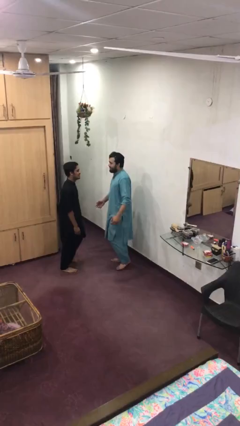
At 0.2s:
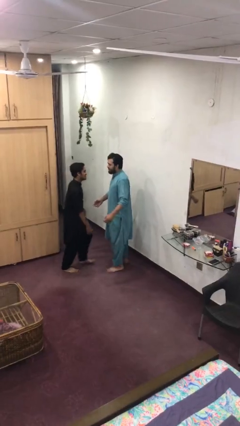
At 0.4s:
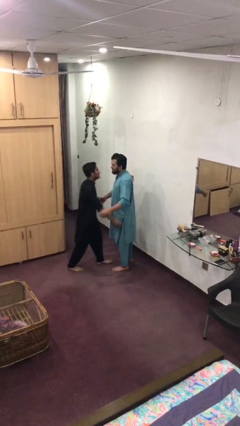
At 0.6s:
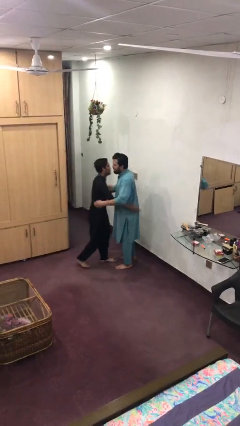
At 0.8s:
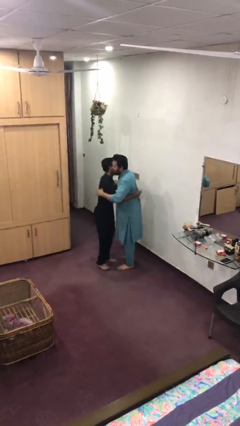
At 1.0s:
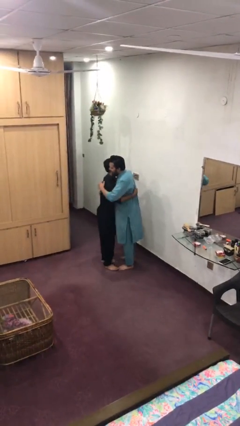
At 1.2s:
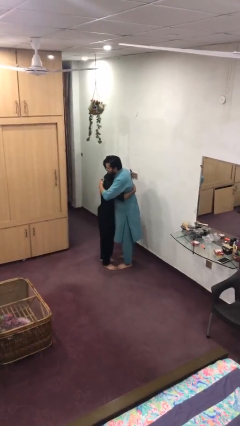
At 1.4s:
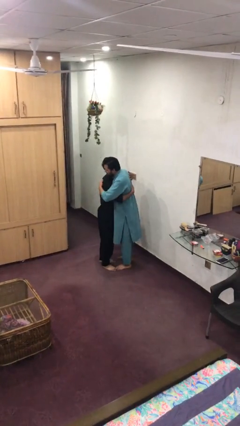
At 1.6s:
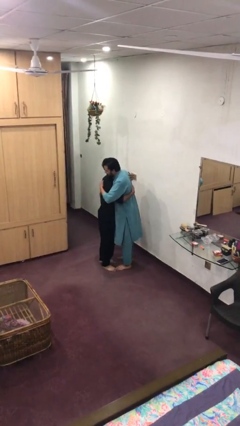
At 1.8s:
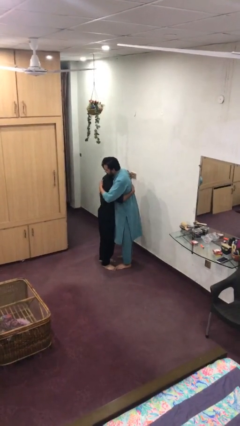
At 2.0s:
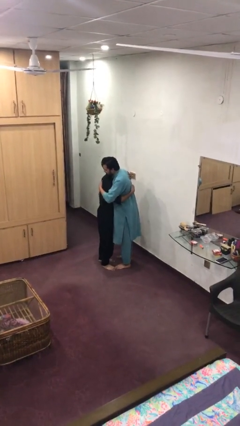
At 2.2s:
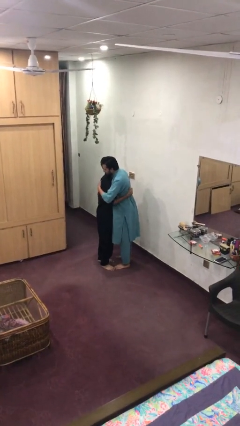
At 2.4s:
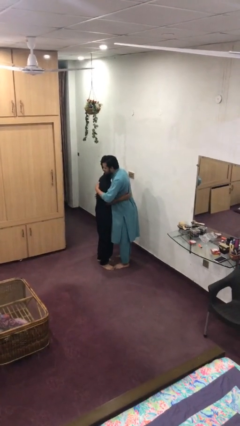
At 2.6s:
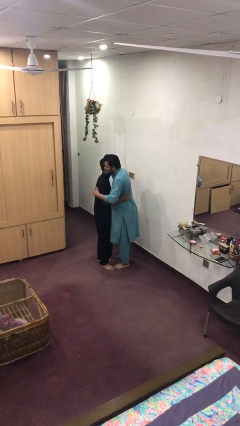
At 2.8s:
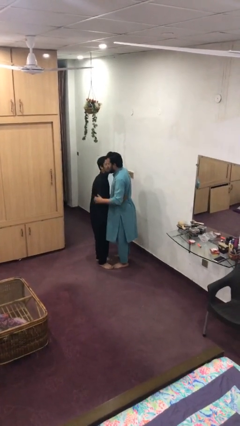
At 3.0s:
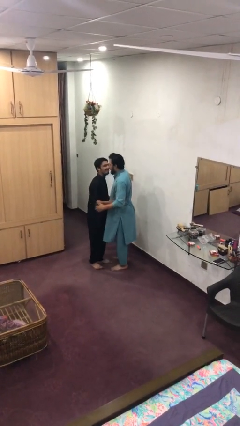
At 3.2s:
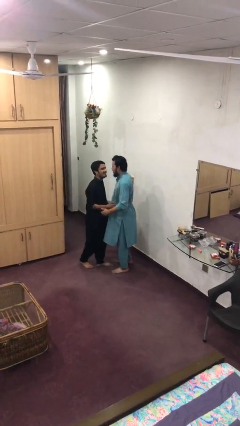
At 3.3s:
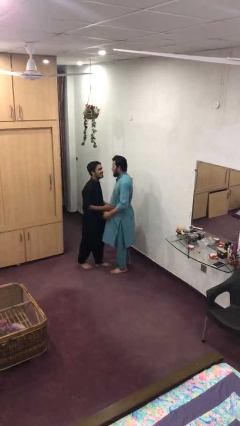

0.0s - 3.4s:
person embraces person

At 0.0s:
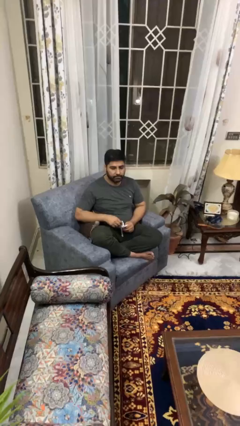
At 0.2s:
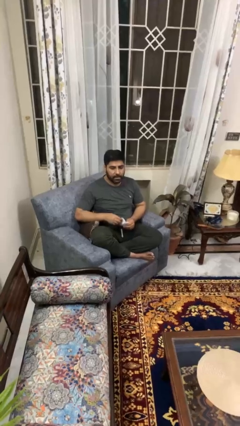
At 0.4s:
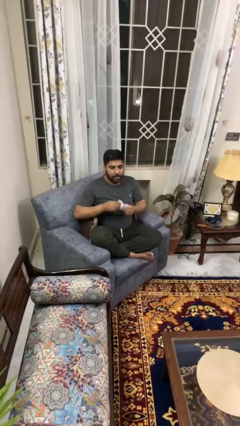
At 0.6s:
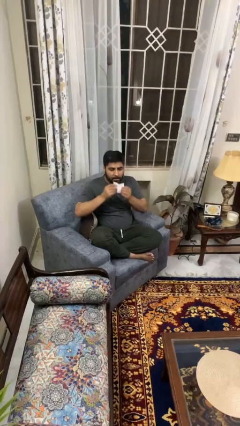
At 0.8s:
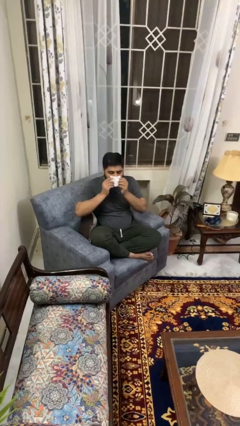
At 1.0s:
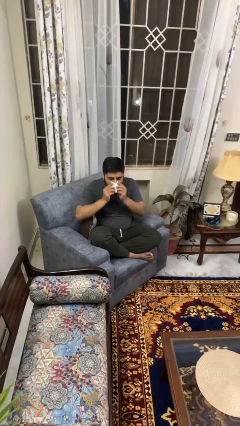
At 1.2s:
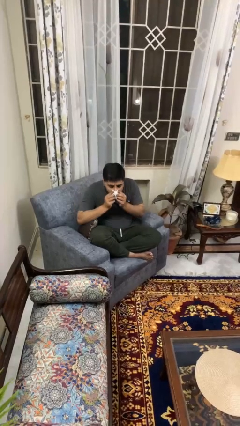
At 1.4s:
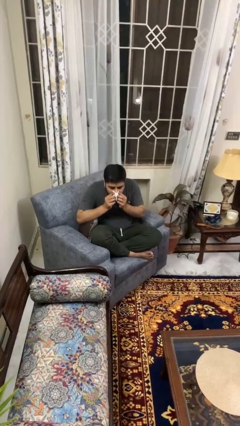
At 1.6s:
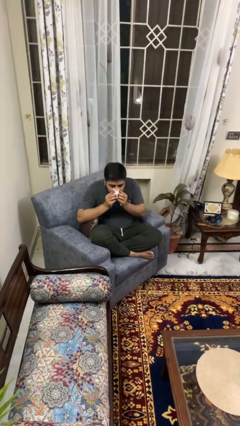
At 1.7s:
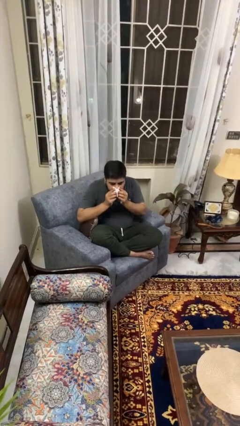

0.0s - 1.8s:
person blows nose

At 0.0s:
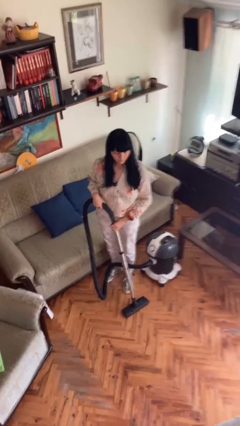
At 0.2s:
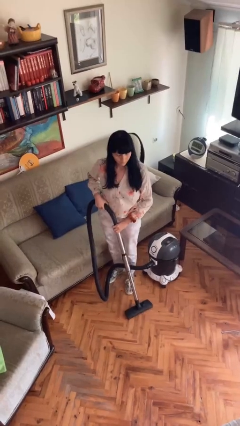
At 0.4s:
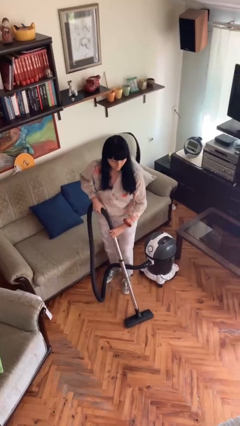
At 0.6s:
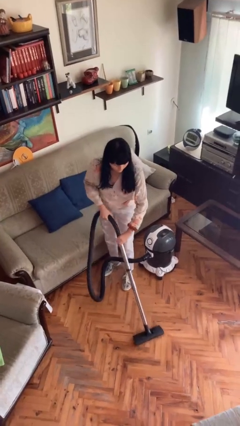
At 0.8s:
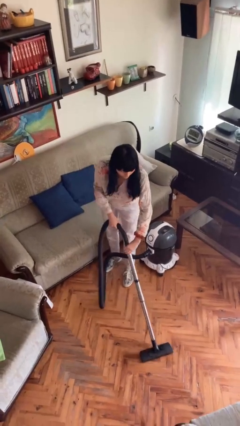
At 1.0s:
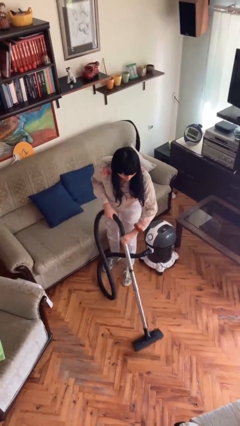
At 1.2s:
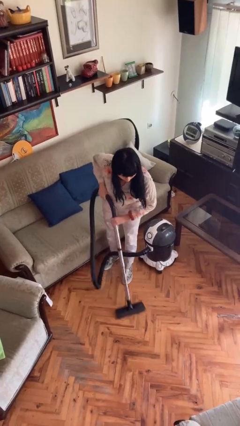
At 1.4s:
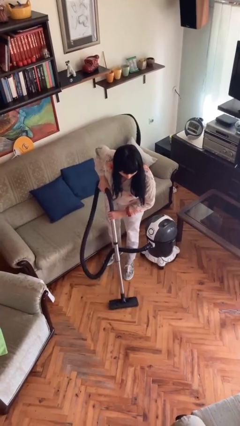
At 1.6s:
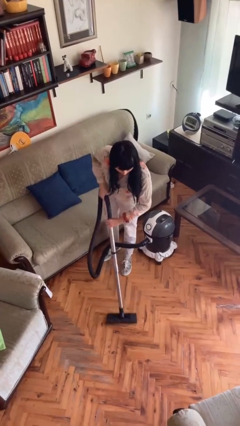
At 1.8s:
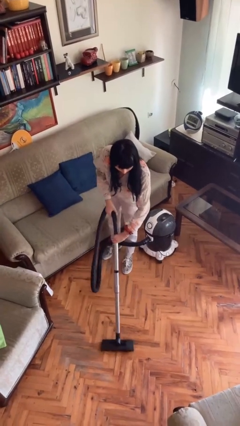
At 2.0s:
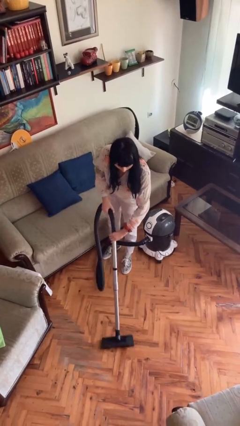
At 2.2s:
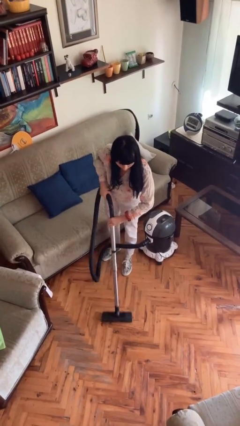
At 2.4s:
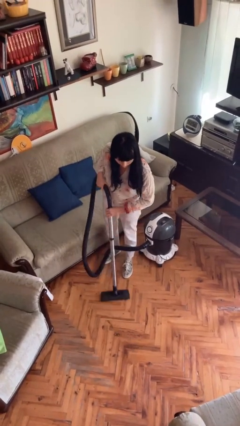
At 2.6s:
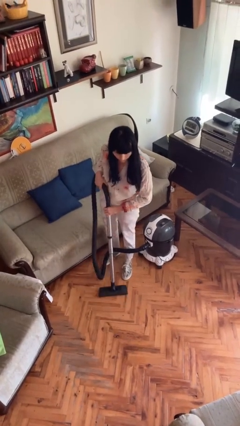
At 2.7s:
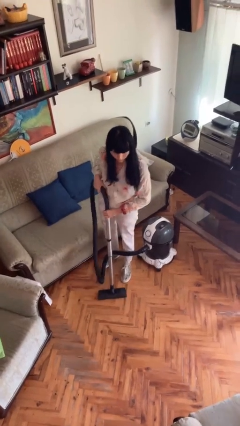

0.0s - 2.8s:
person vacuums carpet

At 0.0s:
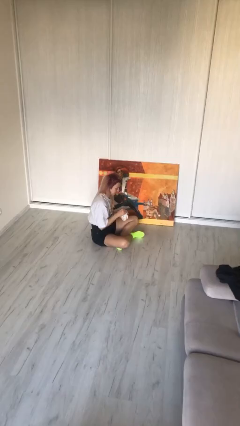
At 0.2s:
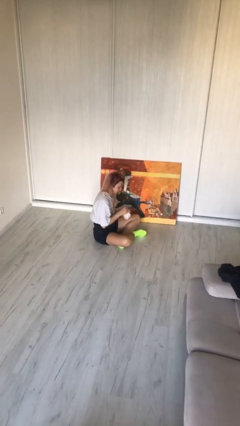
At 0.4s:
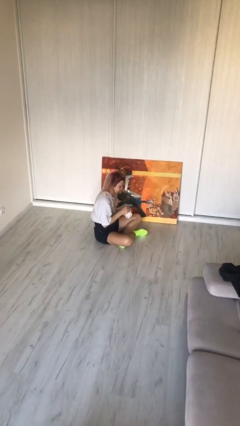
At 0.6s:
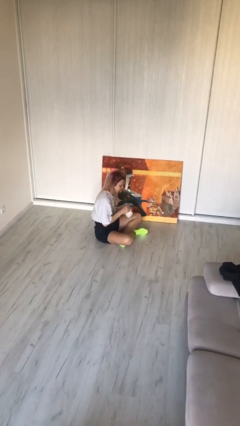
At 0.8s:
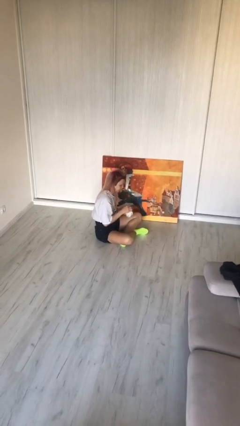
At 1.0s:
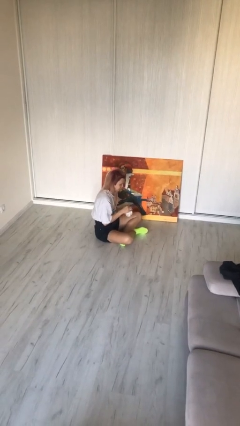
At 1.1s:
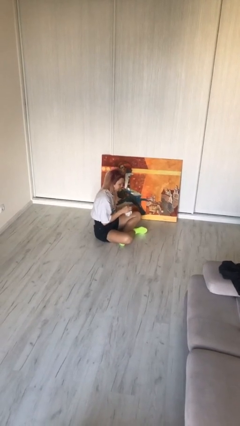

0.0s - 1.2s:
person stirs mug

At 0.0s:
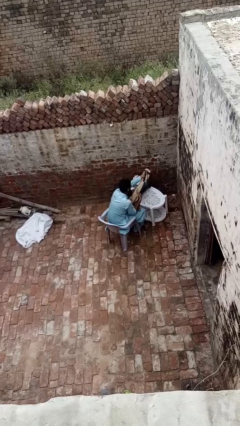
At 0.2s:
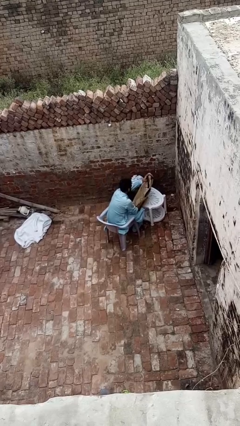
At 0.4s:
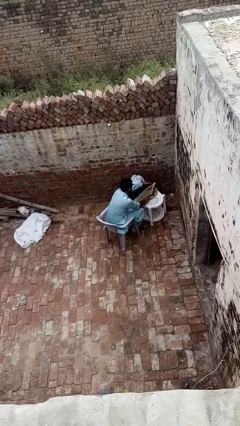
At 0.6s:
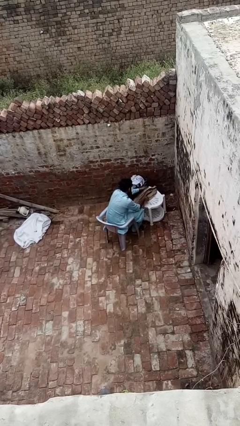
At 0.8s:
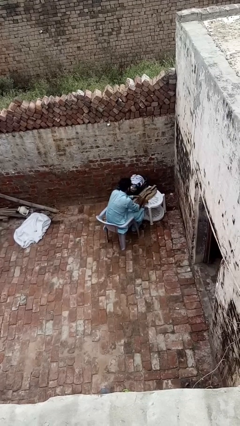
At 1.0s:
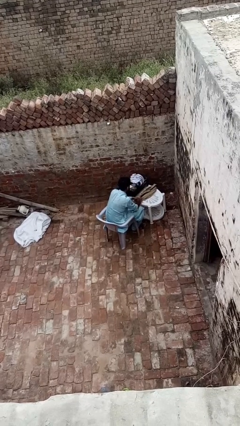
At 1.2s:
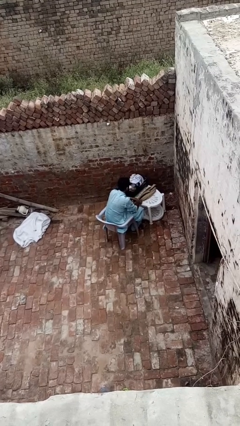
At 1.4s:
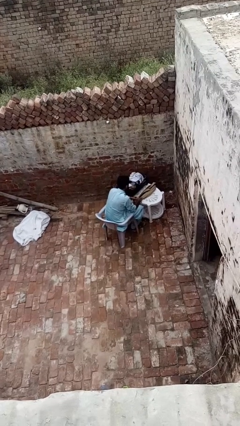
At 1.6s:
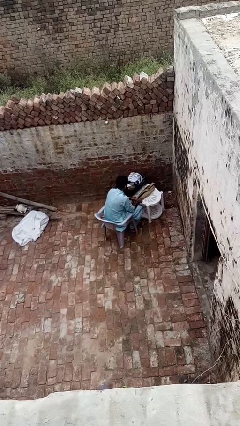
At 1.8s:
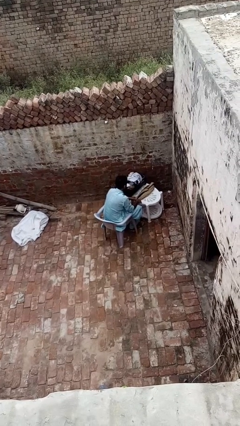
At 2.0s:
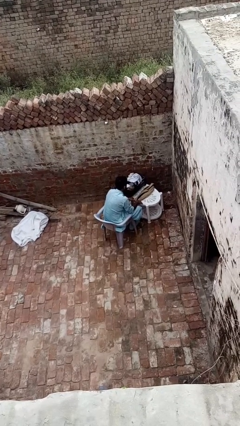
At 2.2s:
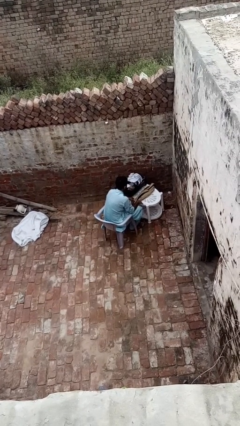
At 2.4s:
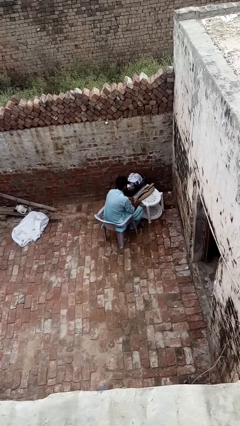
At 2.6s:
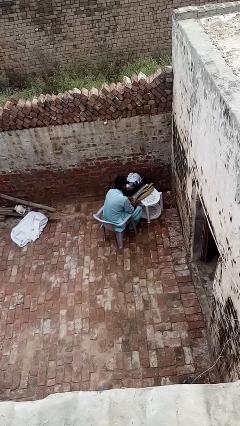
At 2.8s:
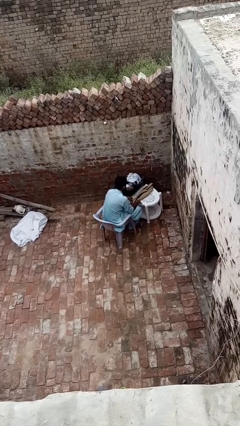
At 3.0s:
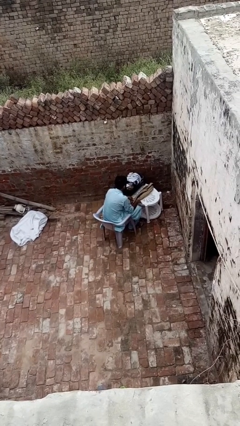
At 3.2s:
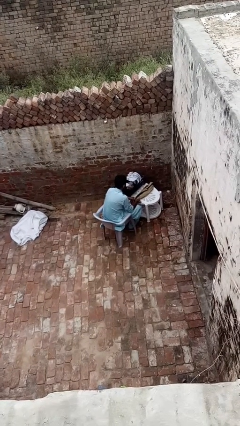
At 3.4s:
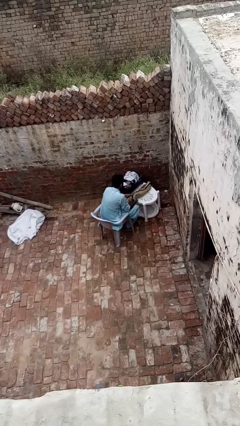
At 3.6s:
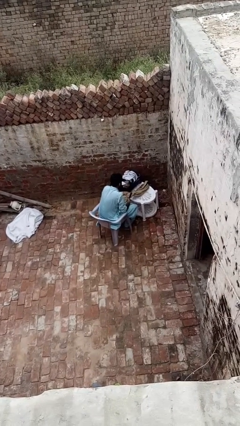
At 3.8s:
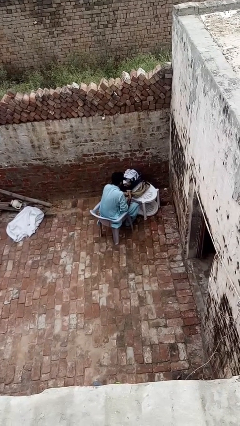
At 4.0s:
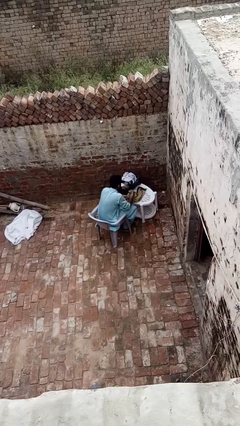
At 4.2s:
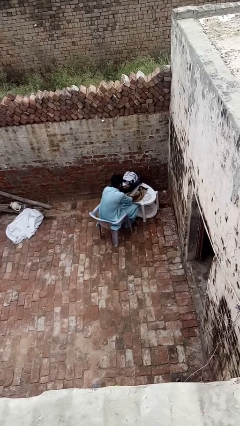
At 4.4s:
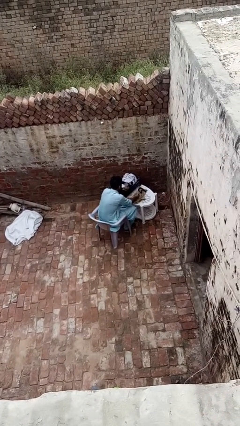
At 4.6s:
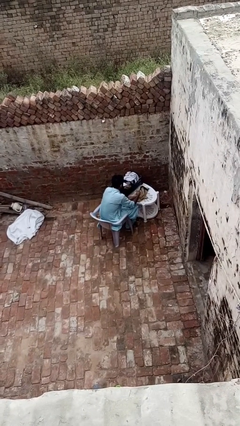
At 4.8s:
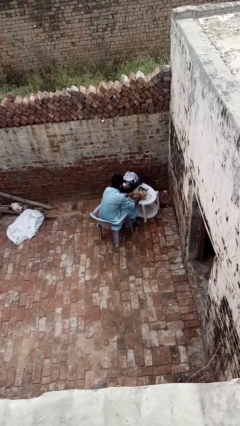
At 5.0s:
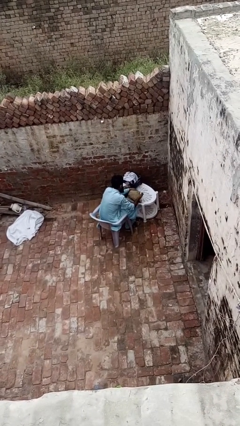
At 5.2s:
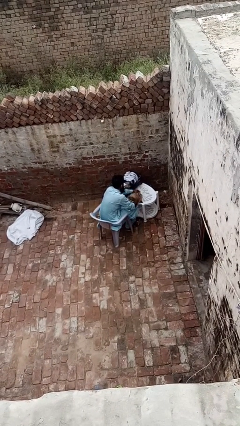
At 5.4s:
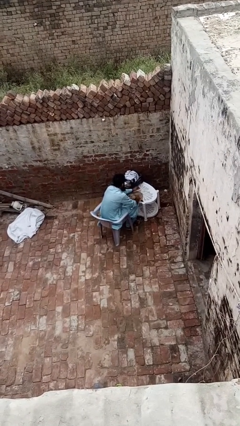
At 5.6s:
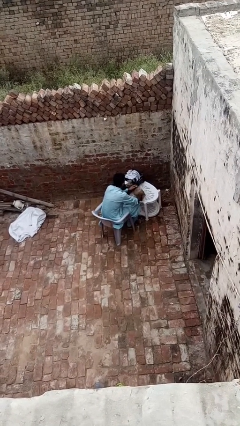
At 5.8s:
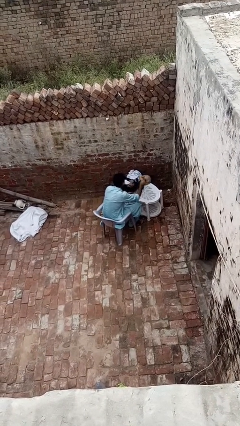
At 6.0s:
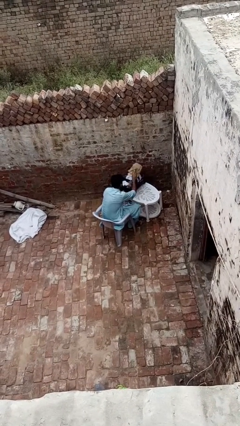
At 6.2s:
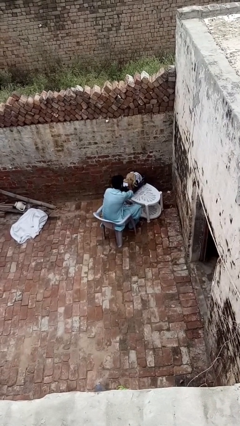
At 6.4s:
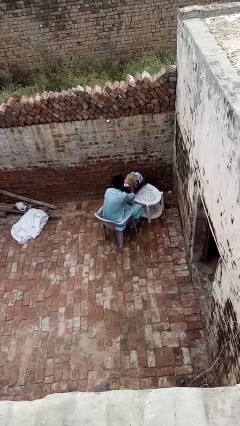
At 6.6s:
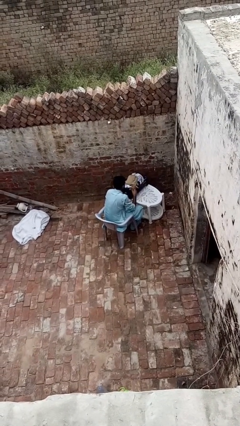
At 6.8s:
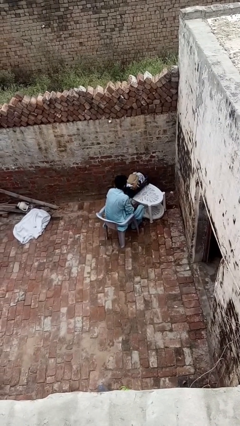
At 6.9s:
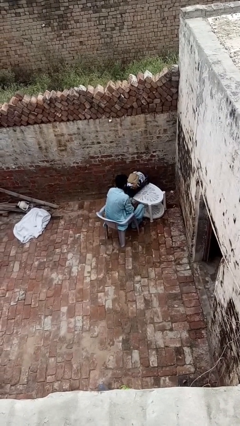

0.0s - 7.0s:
person folds shirt

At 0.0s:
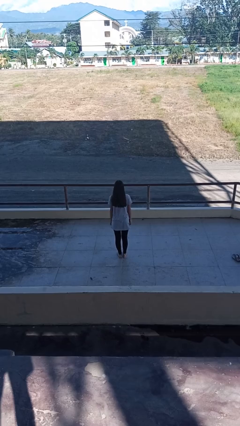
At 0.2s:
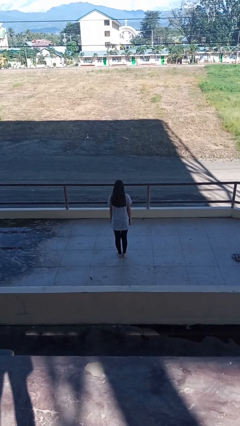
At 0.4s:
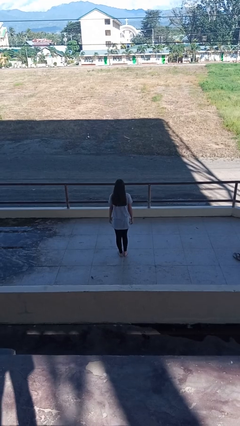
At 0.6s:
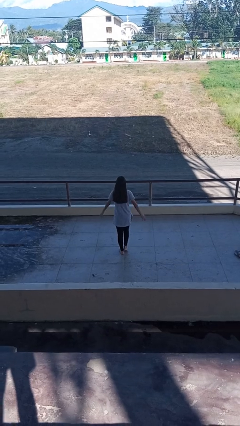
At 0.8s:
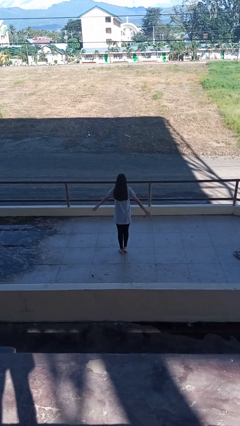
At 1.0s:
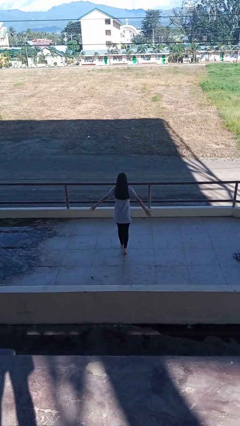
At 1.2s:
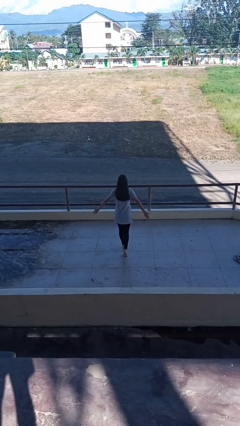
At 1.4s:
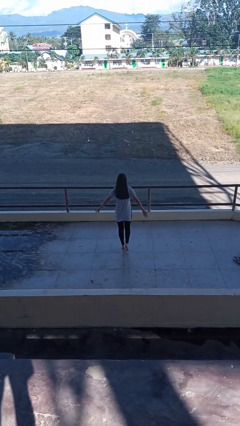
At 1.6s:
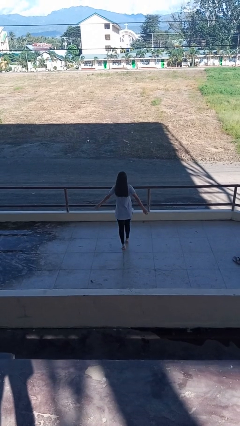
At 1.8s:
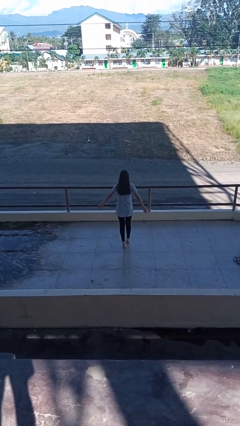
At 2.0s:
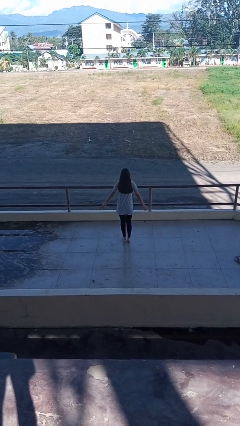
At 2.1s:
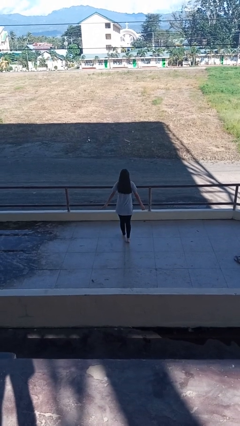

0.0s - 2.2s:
person walks tiptoe
